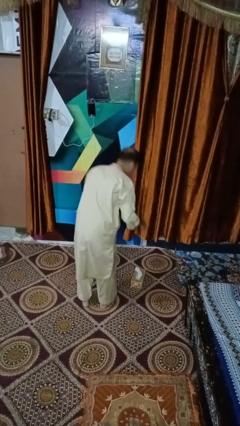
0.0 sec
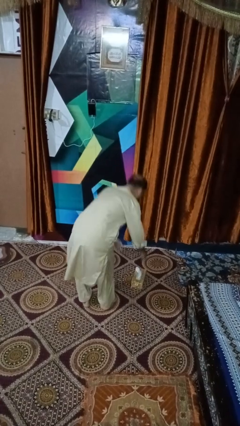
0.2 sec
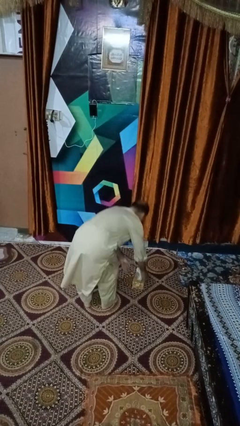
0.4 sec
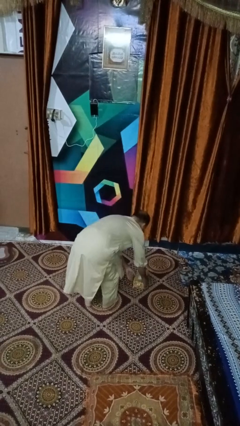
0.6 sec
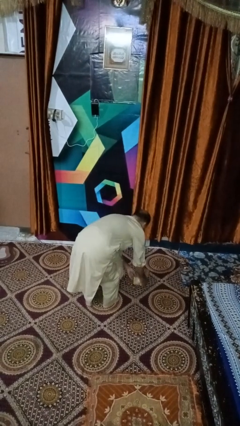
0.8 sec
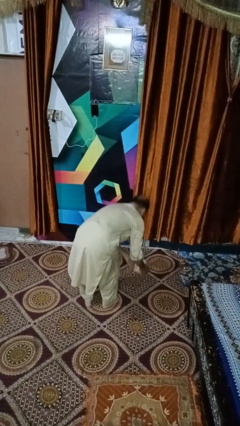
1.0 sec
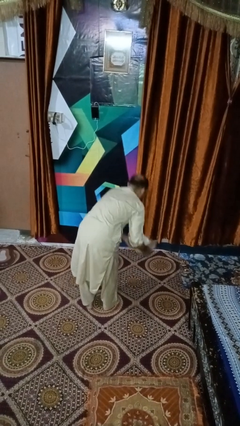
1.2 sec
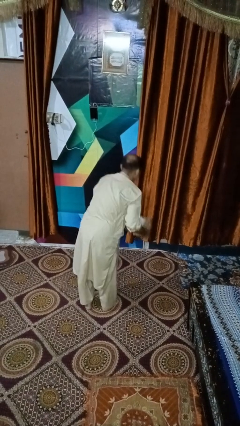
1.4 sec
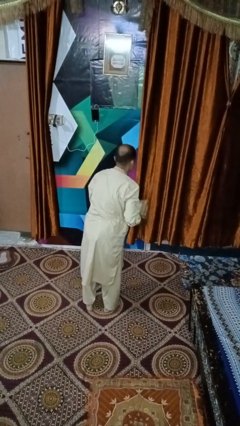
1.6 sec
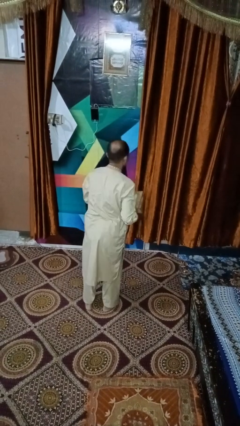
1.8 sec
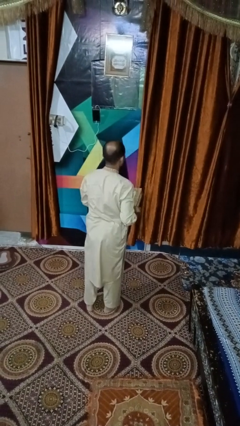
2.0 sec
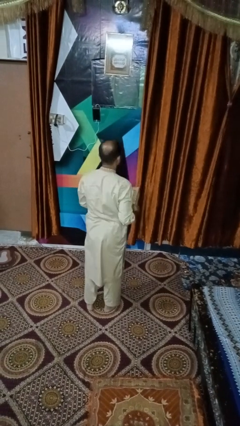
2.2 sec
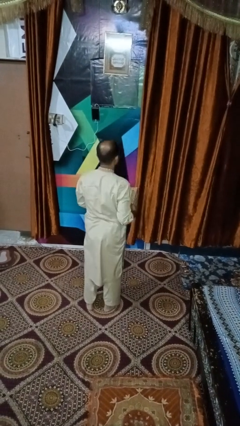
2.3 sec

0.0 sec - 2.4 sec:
person picks up object from floor

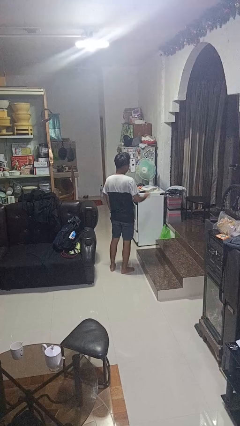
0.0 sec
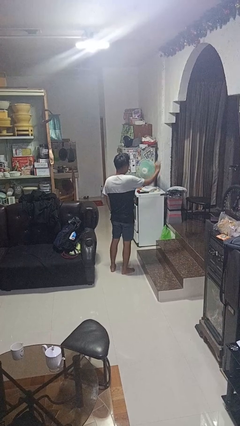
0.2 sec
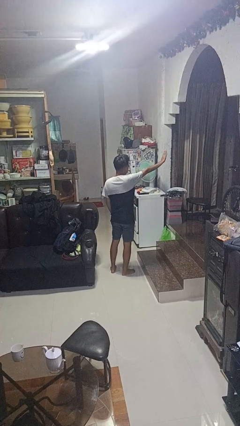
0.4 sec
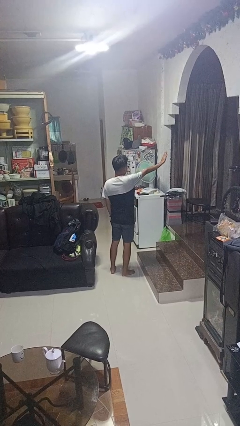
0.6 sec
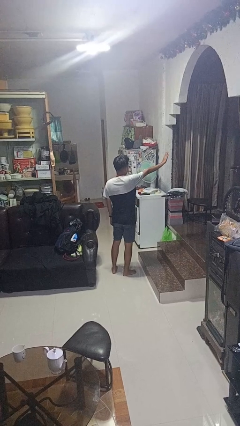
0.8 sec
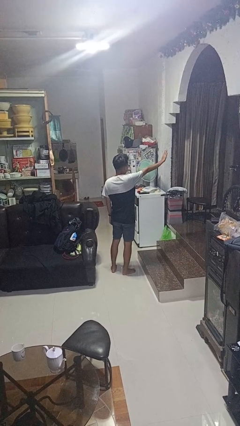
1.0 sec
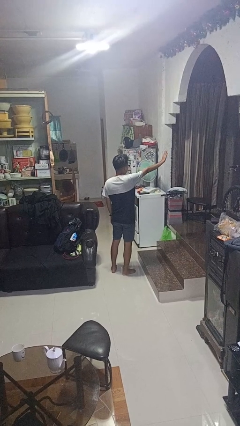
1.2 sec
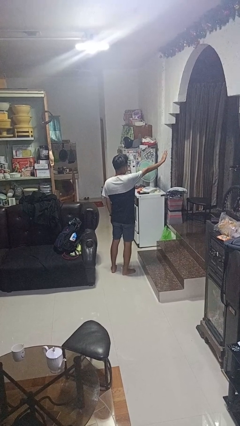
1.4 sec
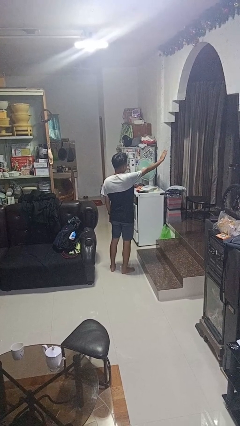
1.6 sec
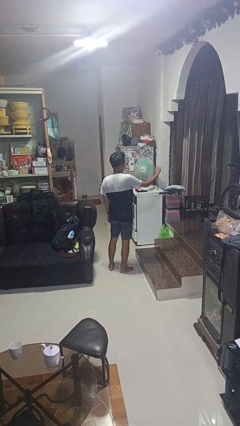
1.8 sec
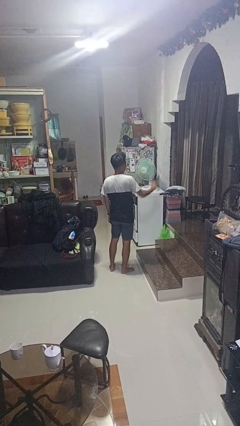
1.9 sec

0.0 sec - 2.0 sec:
person gestures stop

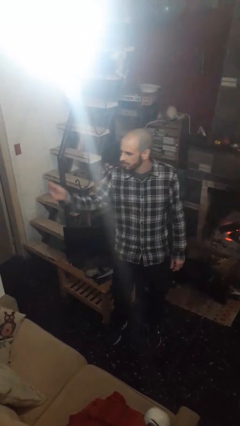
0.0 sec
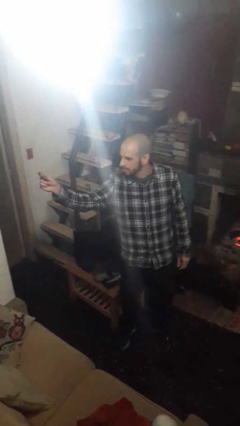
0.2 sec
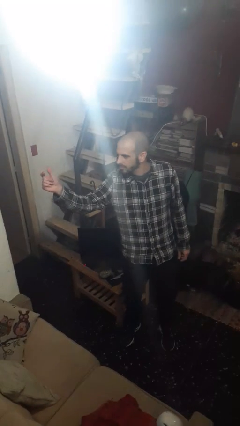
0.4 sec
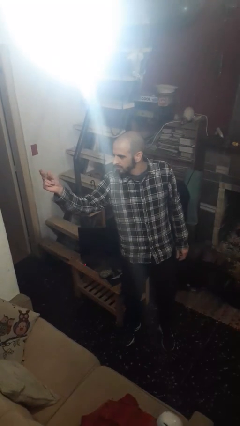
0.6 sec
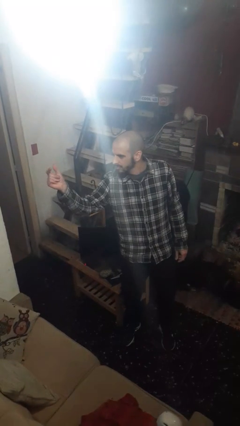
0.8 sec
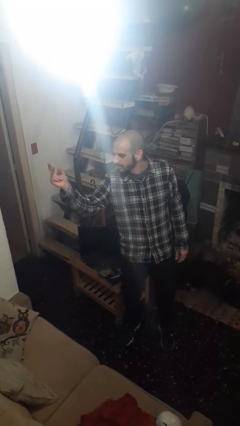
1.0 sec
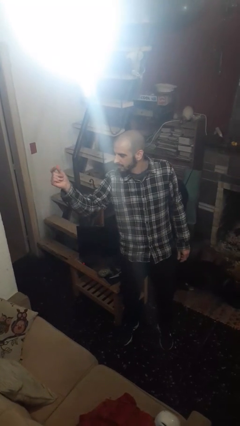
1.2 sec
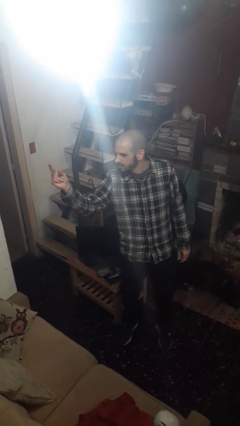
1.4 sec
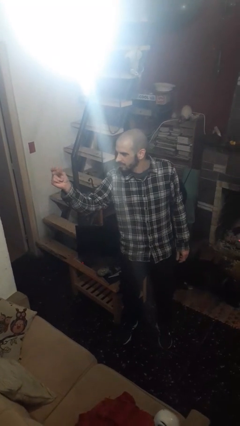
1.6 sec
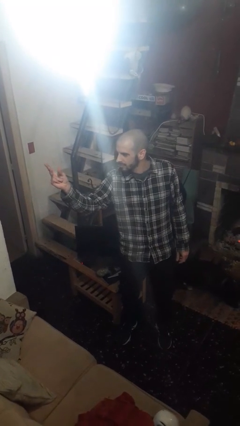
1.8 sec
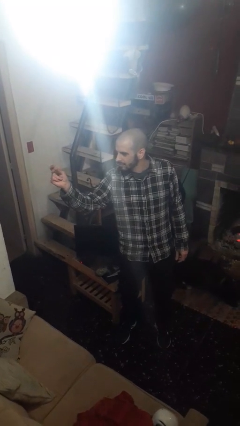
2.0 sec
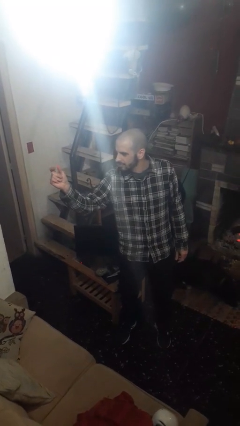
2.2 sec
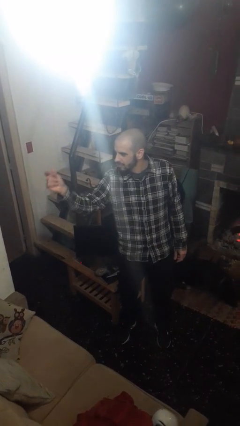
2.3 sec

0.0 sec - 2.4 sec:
person snaps fingers

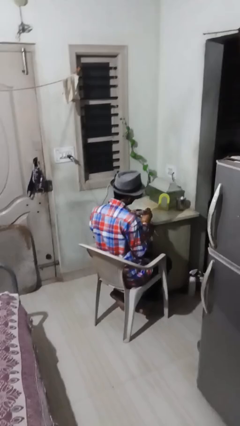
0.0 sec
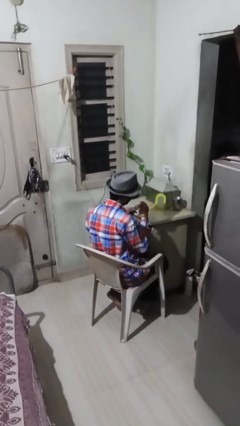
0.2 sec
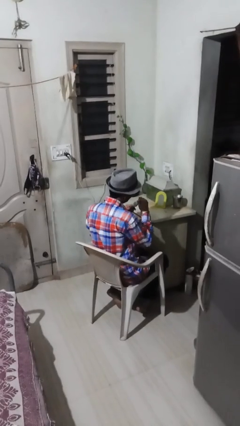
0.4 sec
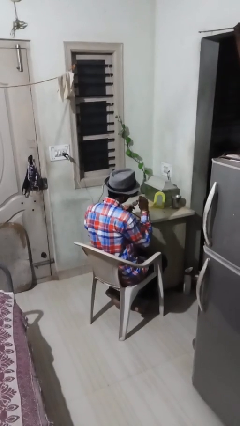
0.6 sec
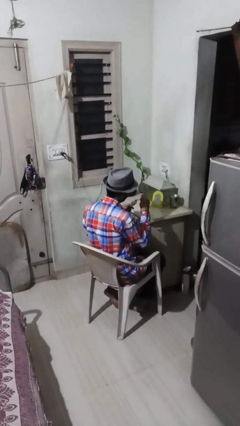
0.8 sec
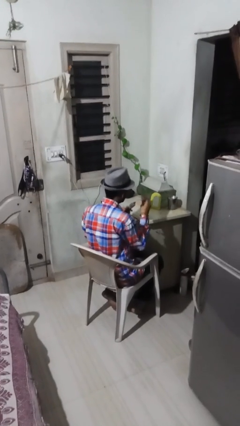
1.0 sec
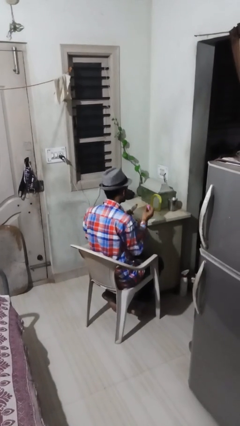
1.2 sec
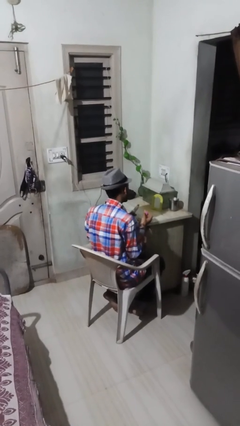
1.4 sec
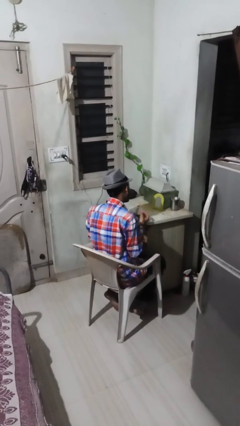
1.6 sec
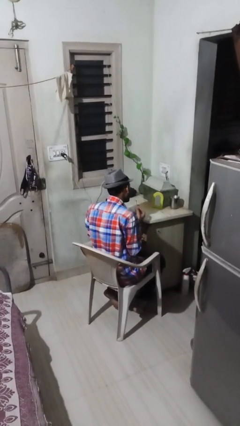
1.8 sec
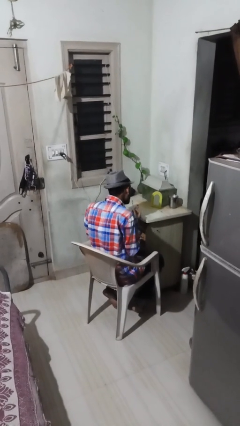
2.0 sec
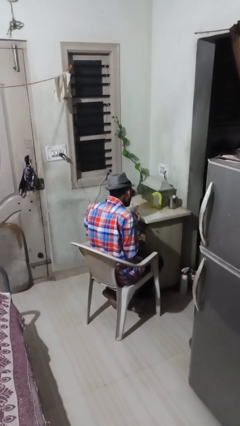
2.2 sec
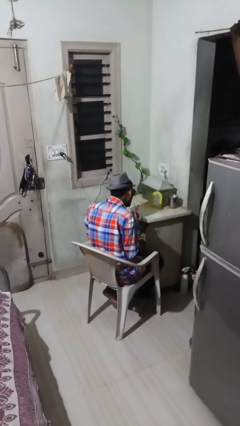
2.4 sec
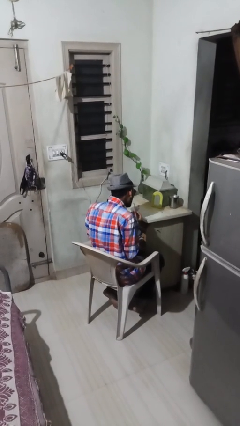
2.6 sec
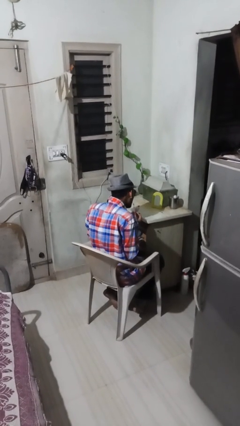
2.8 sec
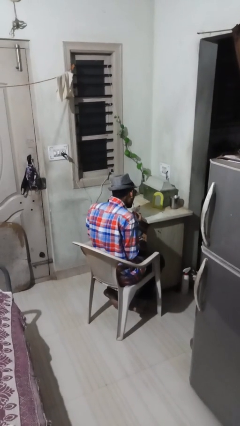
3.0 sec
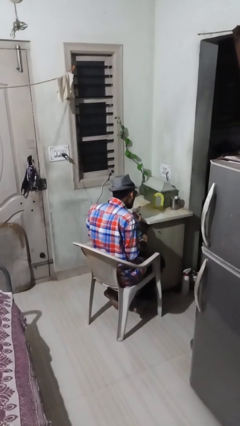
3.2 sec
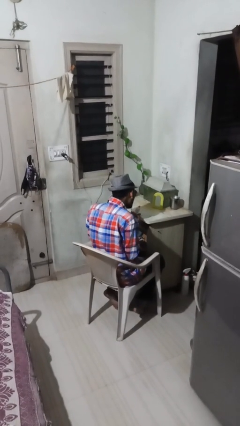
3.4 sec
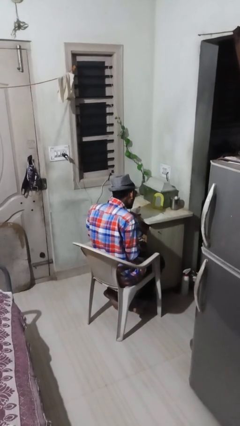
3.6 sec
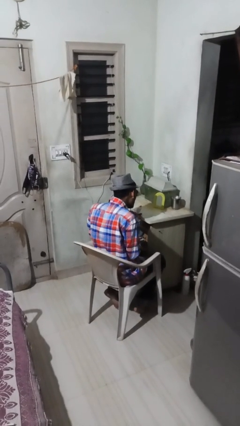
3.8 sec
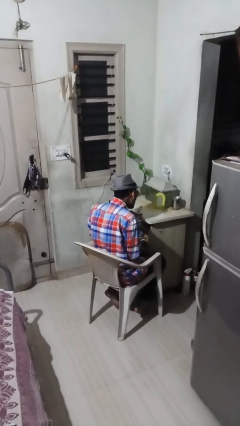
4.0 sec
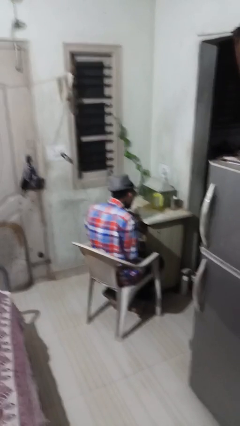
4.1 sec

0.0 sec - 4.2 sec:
person applies lip makeup

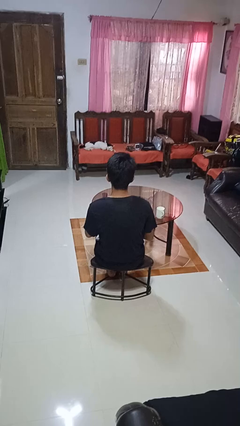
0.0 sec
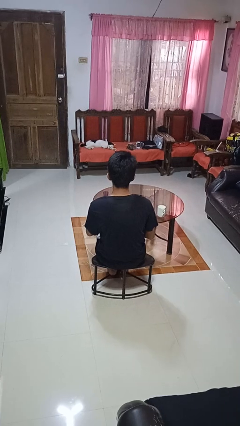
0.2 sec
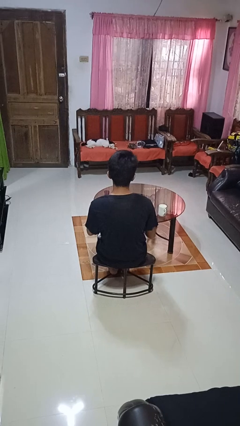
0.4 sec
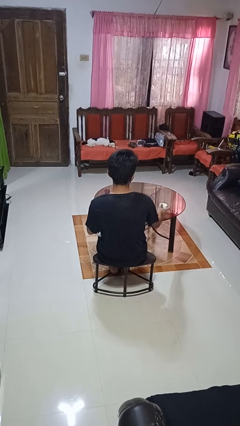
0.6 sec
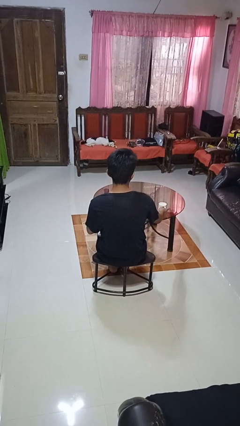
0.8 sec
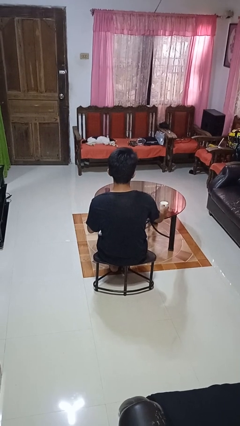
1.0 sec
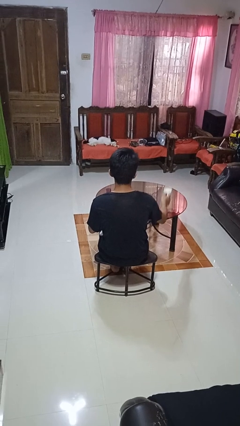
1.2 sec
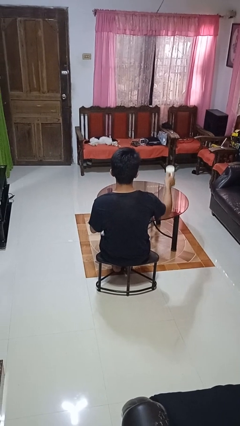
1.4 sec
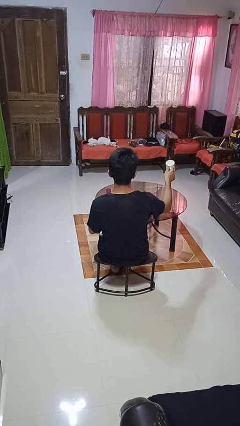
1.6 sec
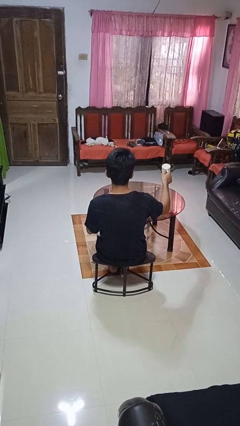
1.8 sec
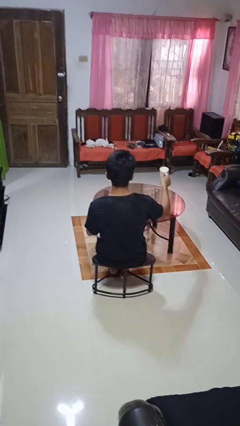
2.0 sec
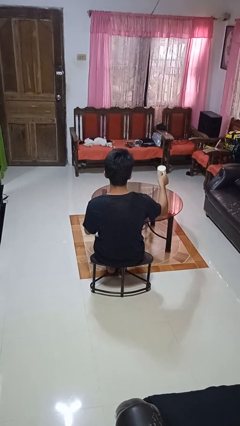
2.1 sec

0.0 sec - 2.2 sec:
person picks up object from table

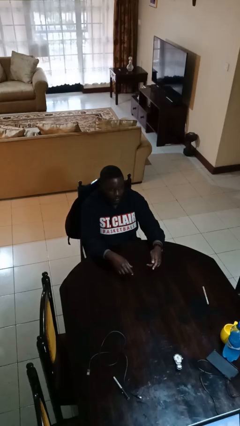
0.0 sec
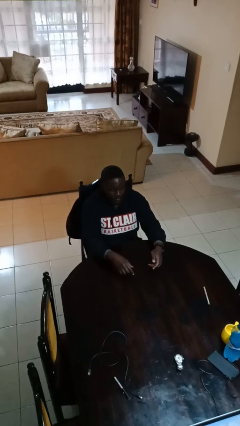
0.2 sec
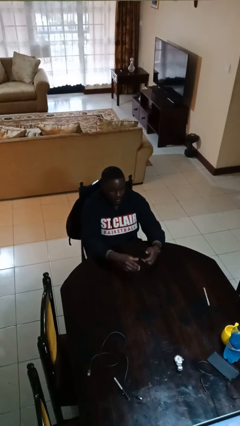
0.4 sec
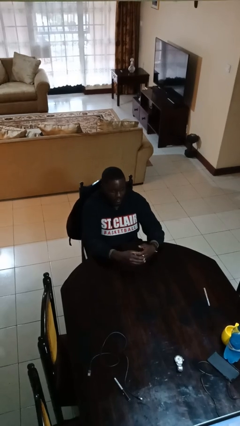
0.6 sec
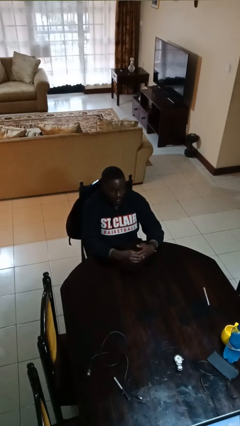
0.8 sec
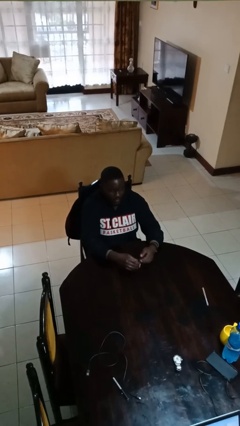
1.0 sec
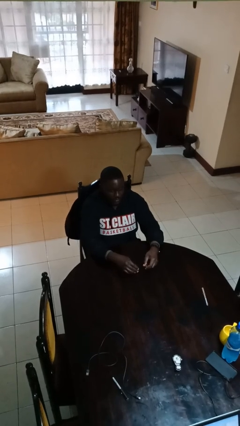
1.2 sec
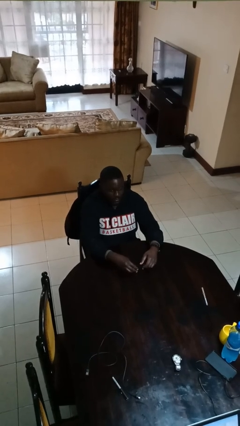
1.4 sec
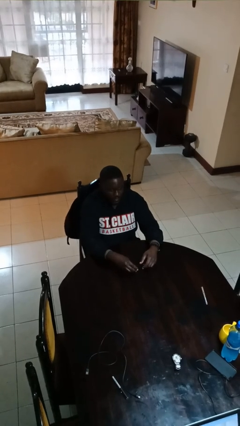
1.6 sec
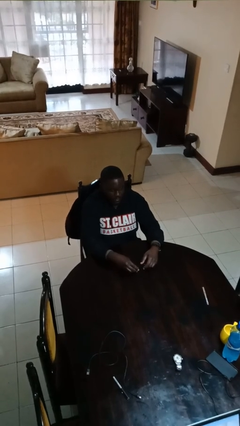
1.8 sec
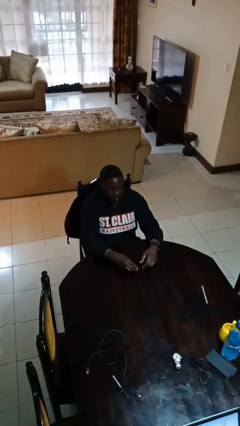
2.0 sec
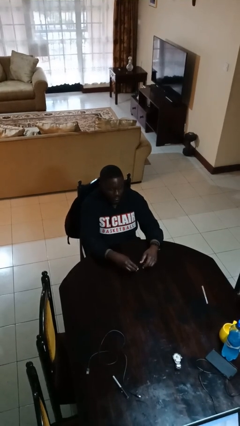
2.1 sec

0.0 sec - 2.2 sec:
person takes off ring

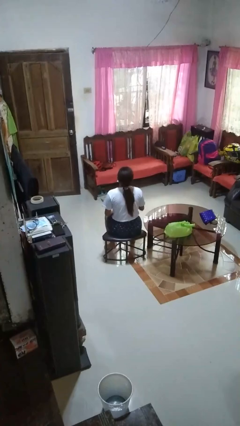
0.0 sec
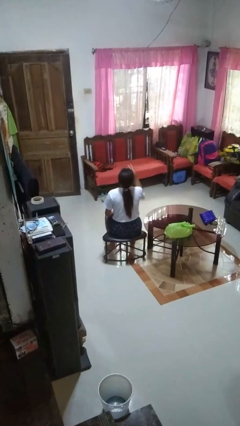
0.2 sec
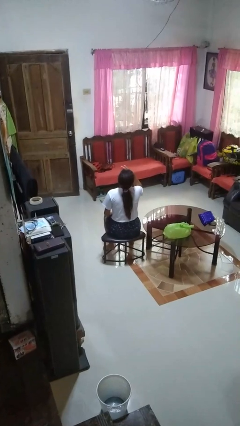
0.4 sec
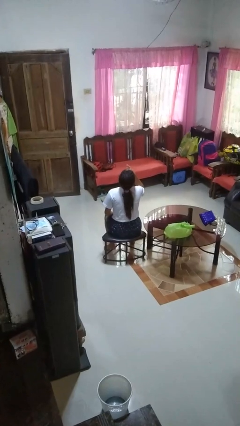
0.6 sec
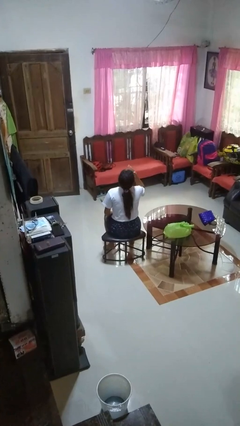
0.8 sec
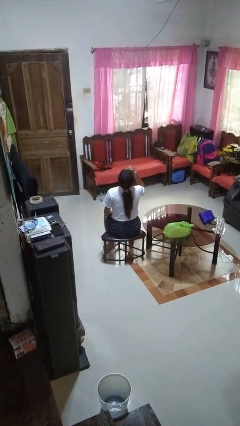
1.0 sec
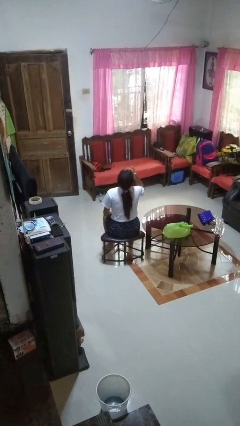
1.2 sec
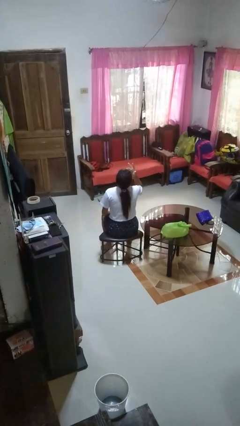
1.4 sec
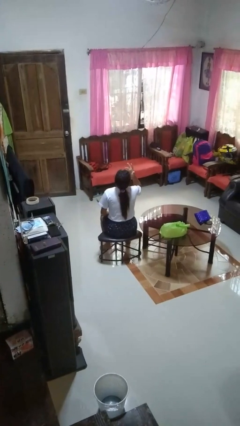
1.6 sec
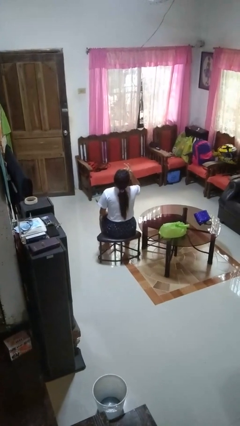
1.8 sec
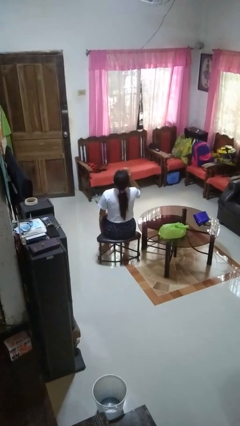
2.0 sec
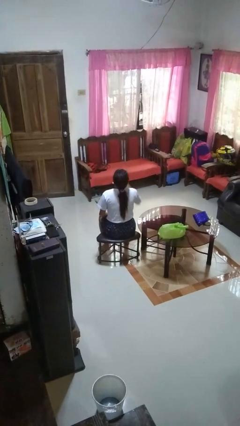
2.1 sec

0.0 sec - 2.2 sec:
person licks fingers
